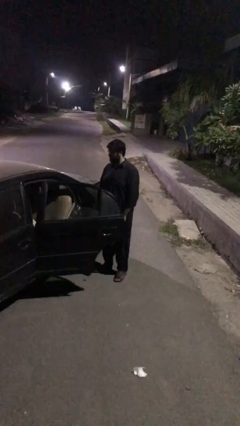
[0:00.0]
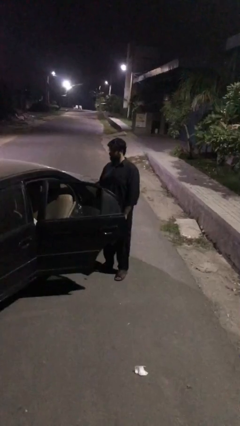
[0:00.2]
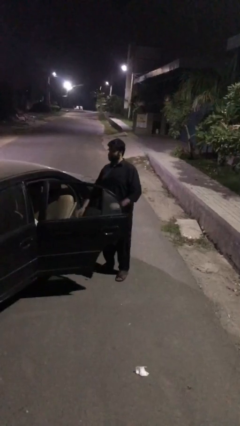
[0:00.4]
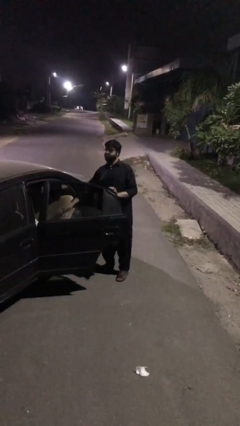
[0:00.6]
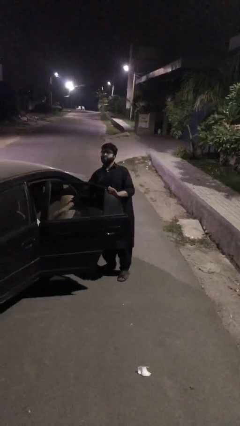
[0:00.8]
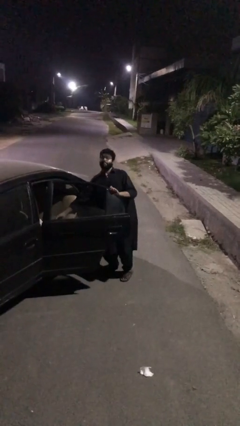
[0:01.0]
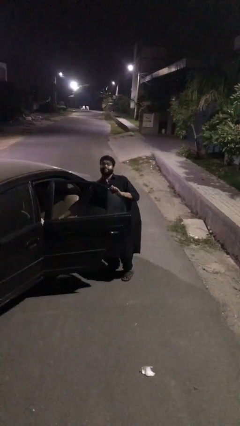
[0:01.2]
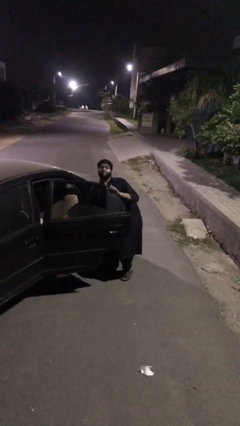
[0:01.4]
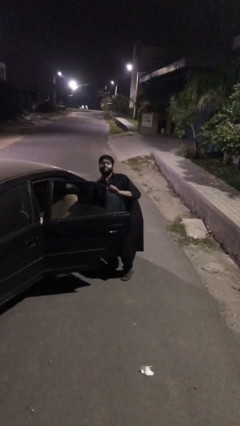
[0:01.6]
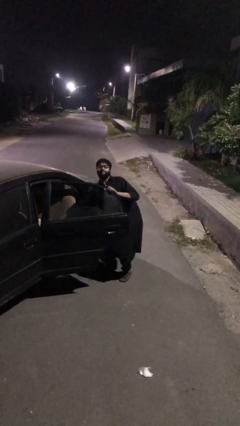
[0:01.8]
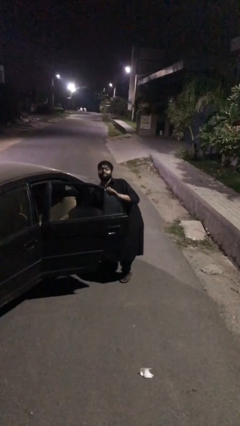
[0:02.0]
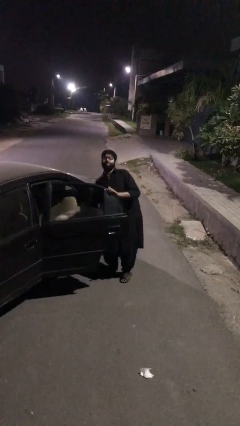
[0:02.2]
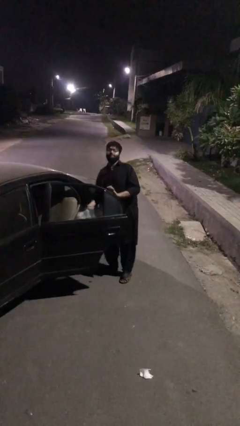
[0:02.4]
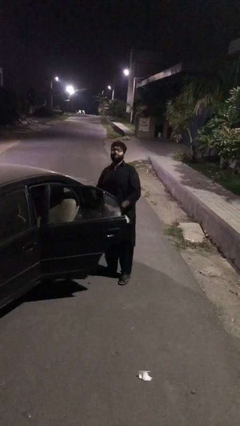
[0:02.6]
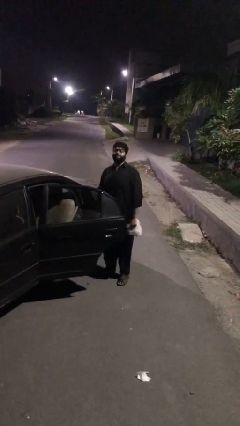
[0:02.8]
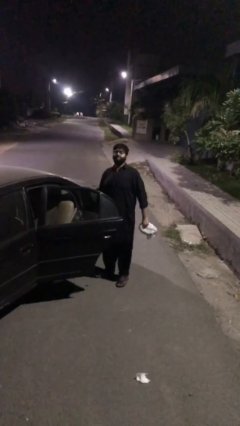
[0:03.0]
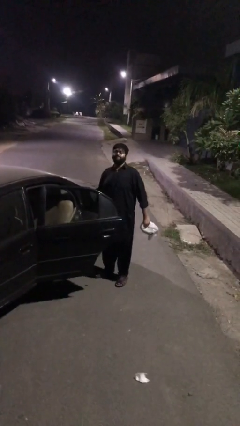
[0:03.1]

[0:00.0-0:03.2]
person unloads car

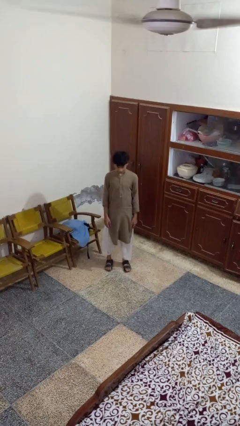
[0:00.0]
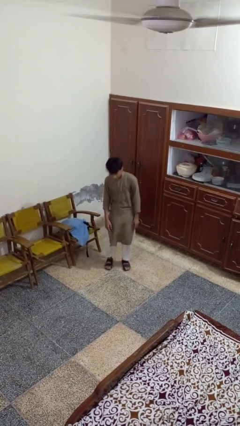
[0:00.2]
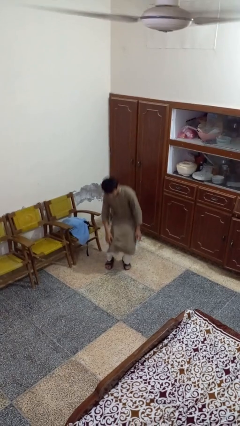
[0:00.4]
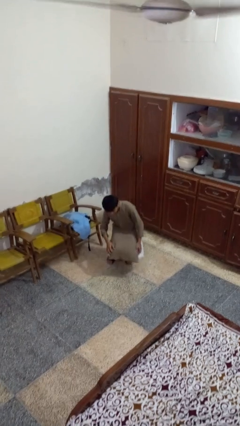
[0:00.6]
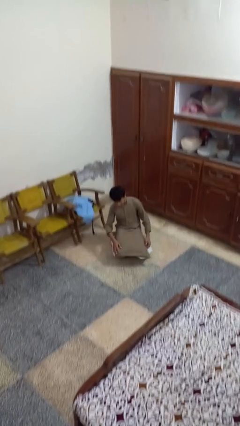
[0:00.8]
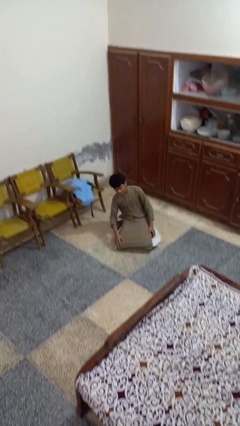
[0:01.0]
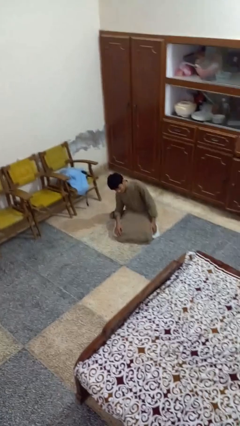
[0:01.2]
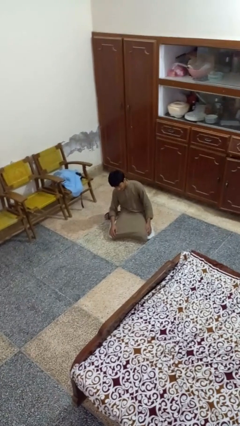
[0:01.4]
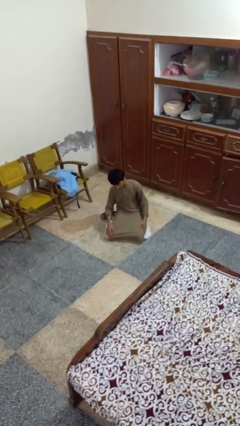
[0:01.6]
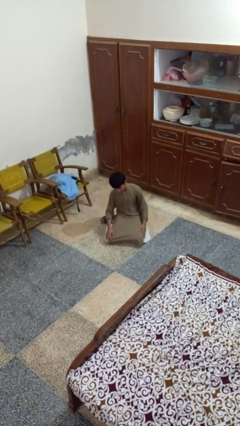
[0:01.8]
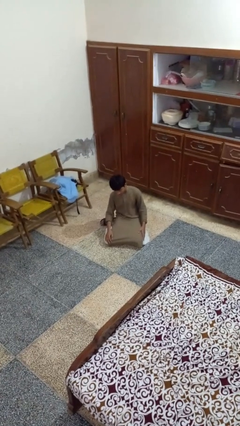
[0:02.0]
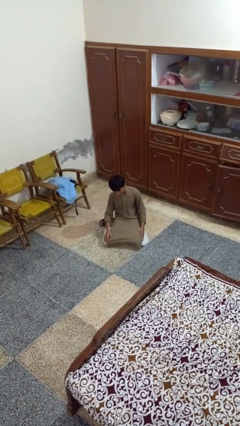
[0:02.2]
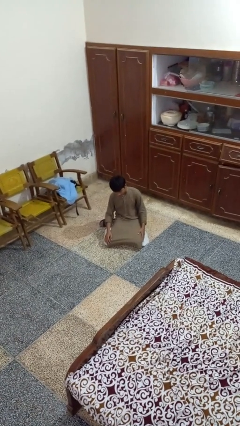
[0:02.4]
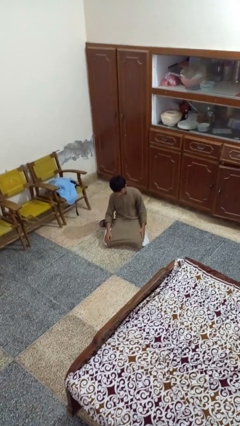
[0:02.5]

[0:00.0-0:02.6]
person falls while standing

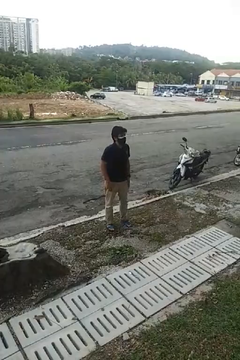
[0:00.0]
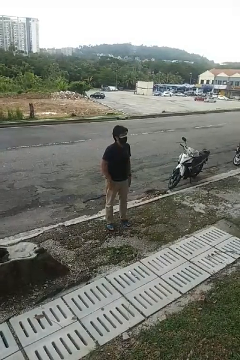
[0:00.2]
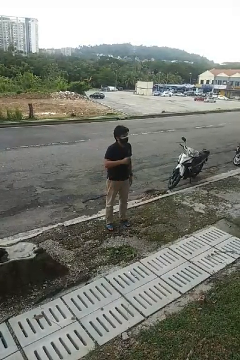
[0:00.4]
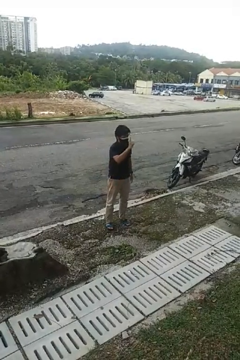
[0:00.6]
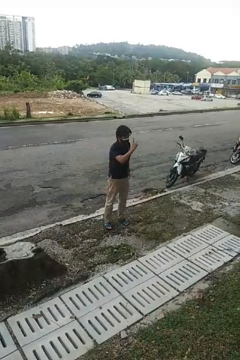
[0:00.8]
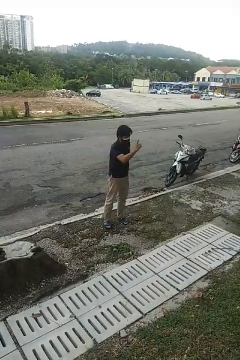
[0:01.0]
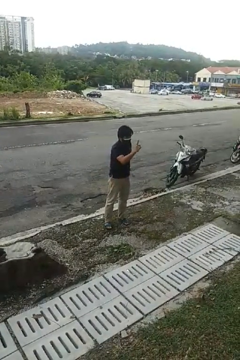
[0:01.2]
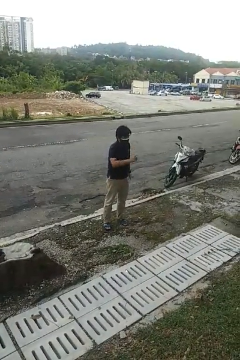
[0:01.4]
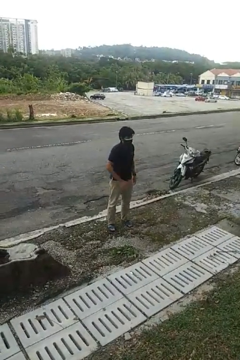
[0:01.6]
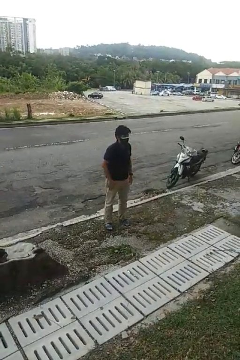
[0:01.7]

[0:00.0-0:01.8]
person gestures number one

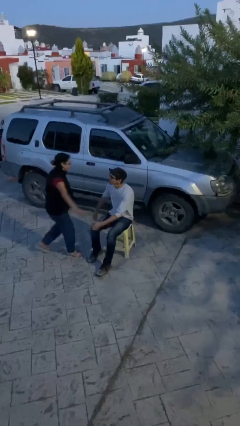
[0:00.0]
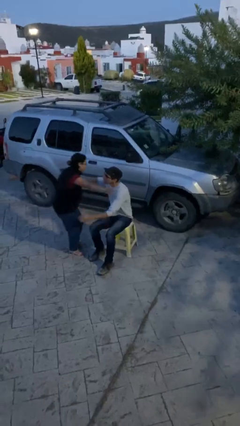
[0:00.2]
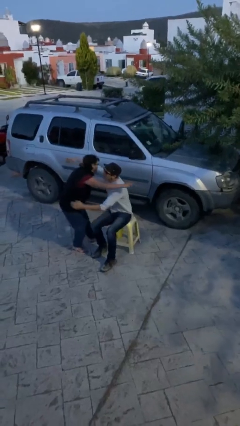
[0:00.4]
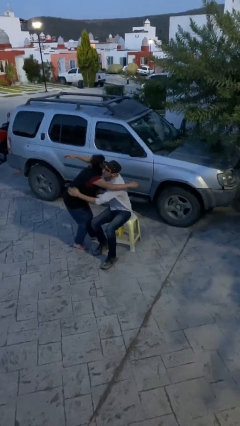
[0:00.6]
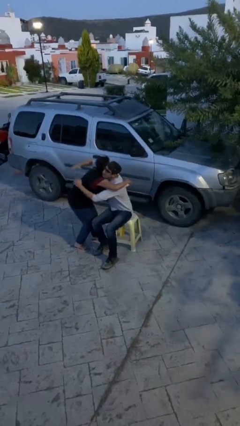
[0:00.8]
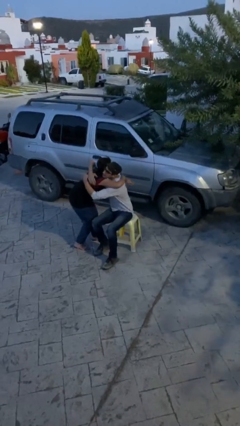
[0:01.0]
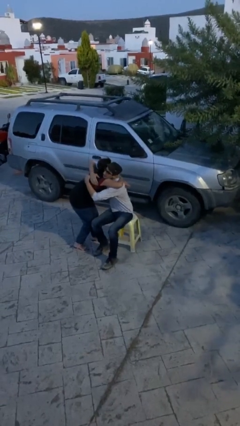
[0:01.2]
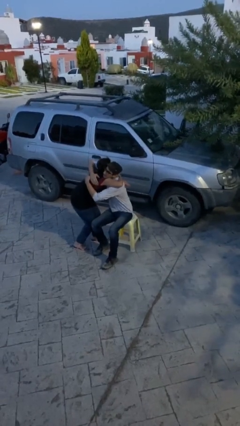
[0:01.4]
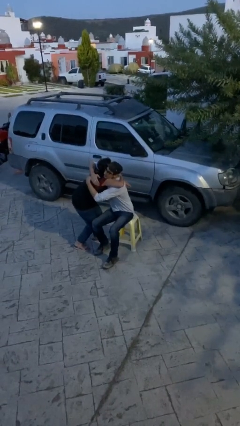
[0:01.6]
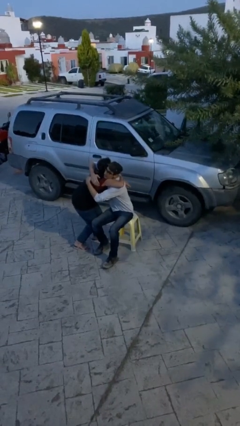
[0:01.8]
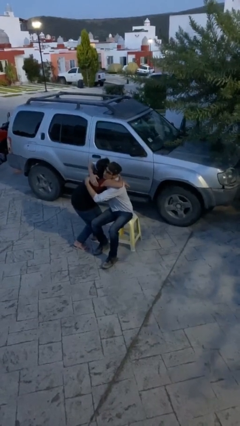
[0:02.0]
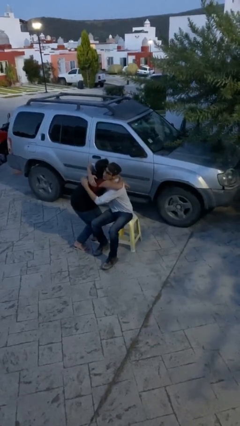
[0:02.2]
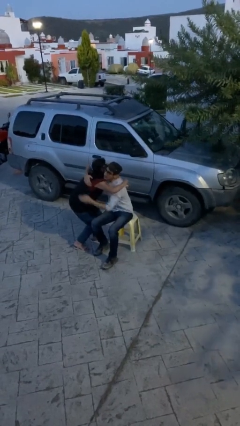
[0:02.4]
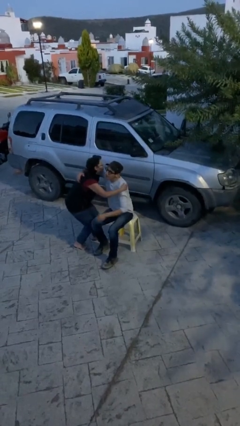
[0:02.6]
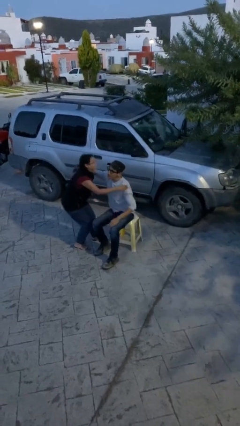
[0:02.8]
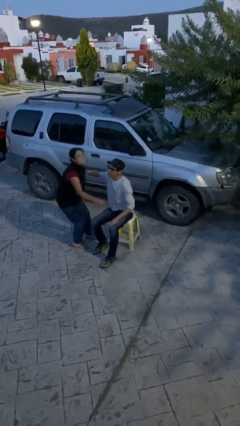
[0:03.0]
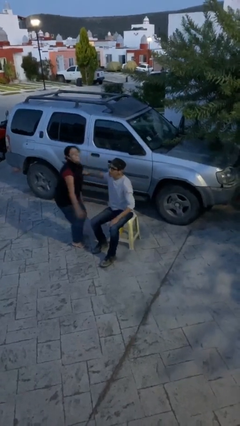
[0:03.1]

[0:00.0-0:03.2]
person embraces person

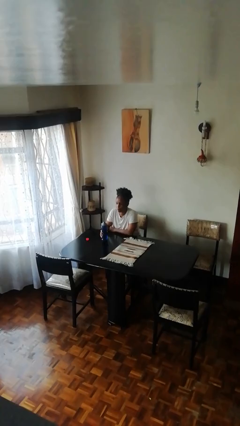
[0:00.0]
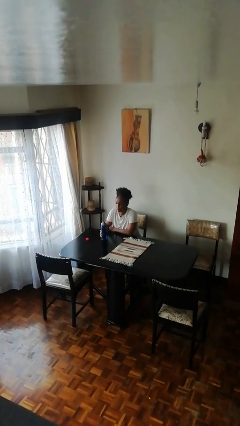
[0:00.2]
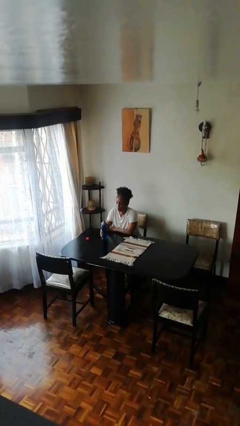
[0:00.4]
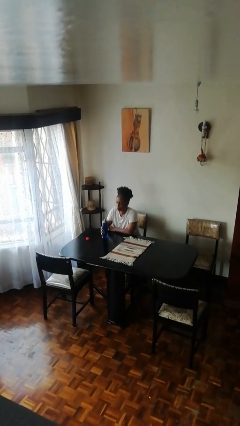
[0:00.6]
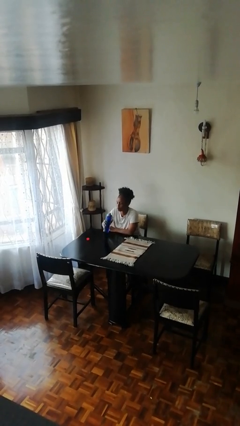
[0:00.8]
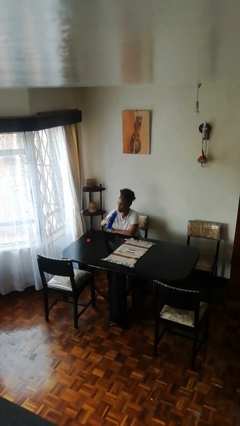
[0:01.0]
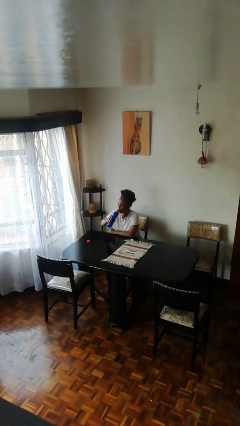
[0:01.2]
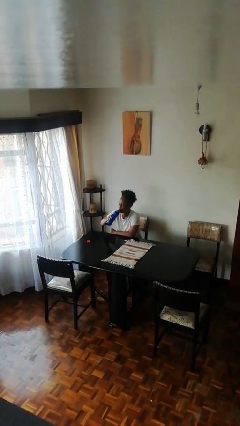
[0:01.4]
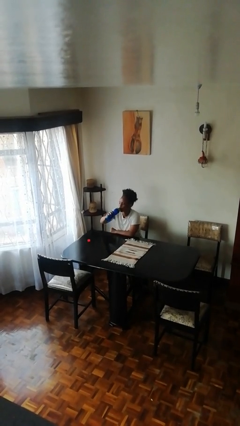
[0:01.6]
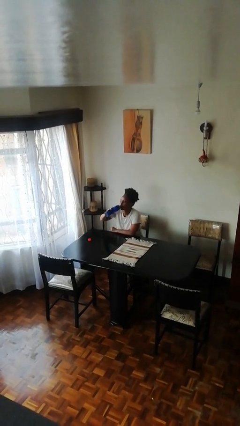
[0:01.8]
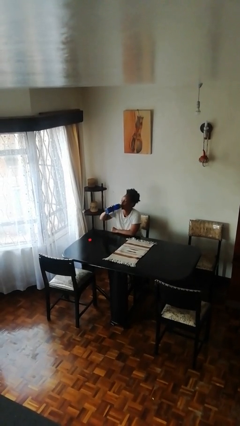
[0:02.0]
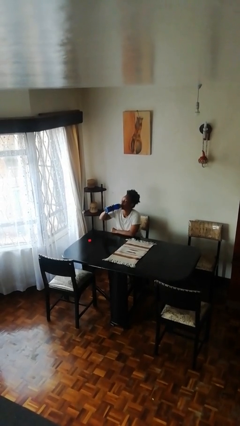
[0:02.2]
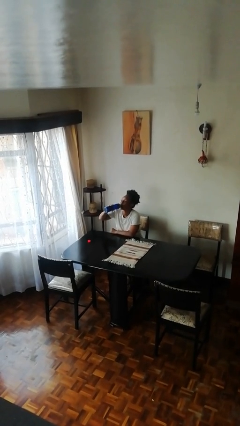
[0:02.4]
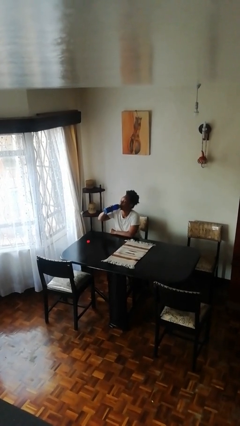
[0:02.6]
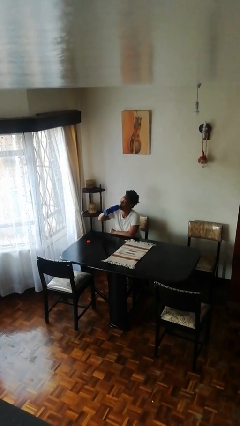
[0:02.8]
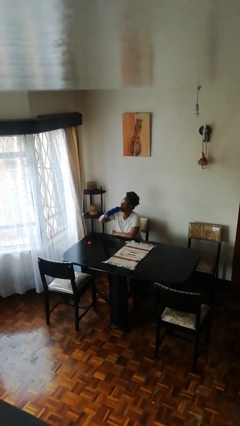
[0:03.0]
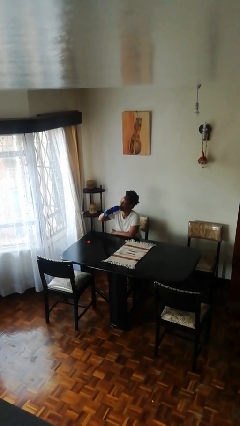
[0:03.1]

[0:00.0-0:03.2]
person drinks from bottle

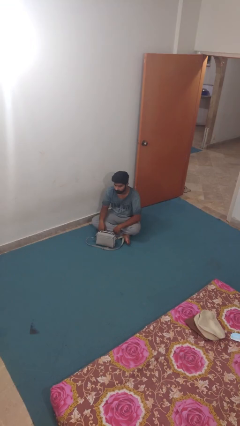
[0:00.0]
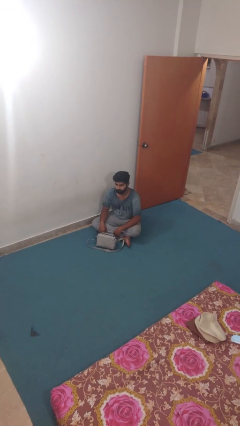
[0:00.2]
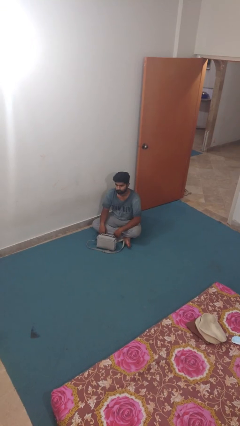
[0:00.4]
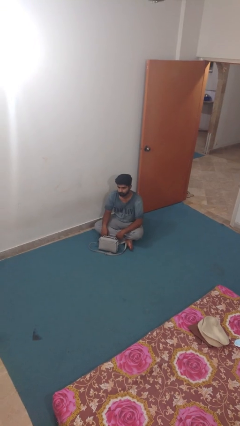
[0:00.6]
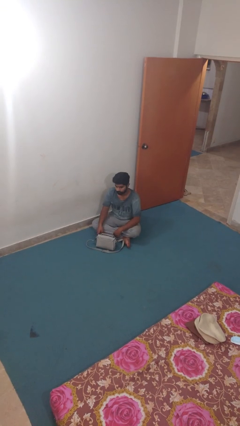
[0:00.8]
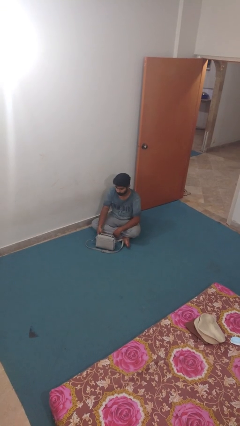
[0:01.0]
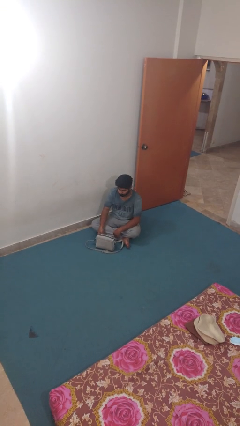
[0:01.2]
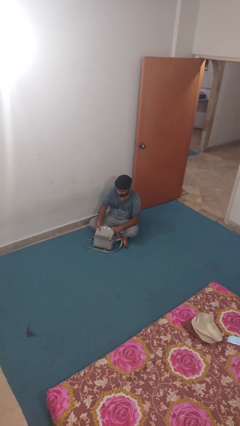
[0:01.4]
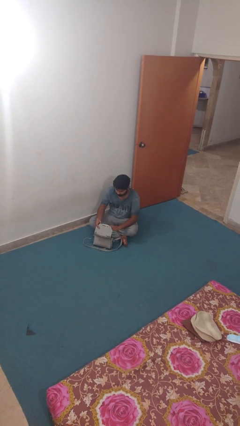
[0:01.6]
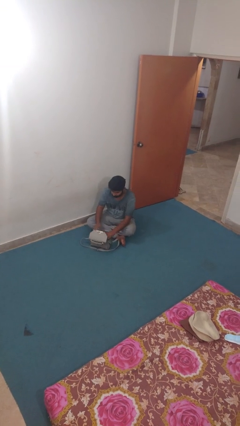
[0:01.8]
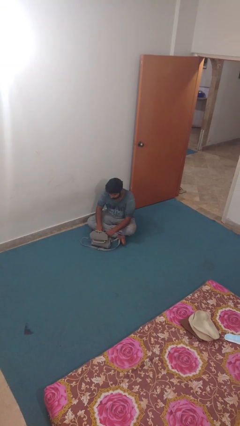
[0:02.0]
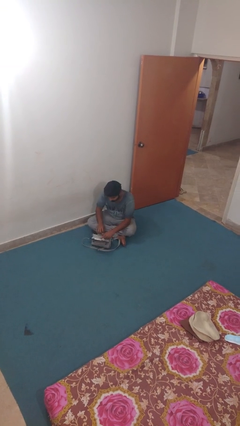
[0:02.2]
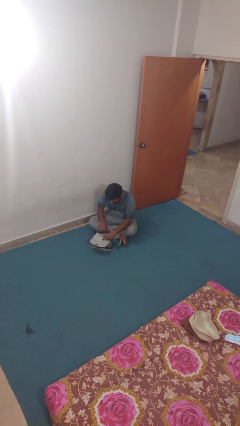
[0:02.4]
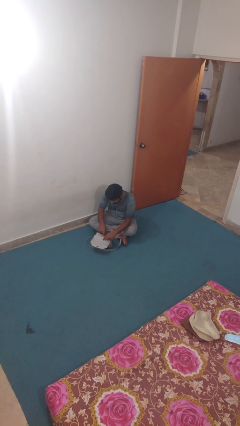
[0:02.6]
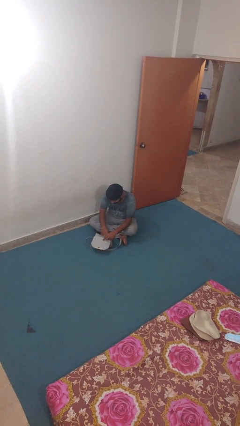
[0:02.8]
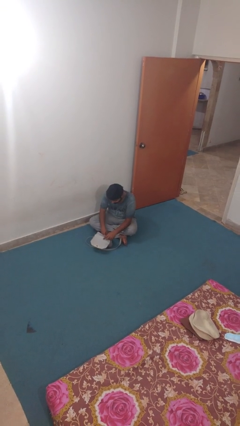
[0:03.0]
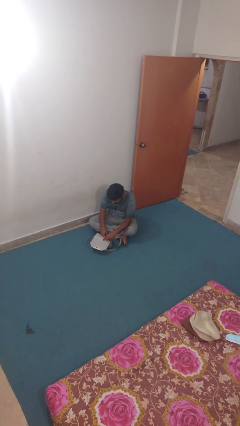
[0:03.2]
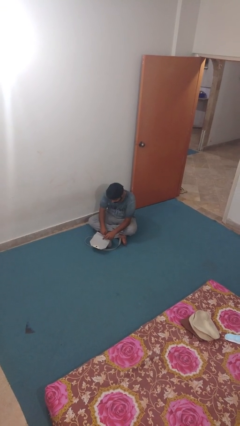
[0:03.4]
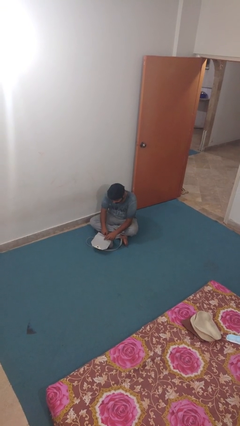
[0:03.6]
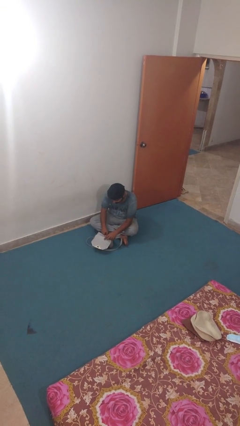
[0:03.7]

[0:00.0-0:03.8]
person searches in purse
